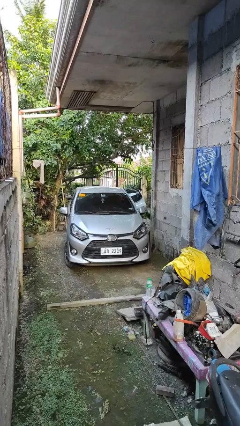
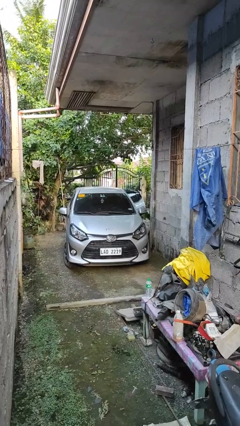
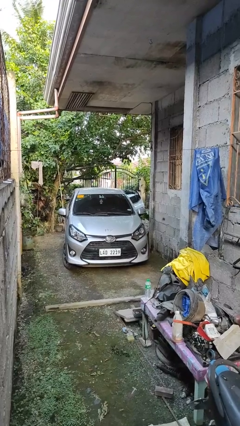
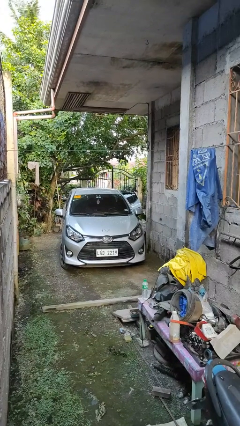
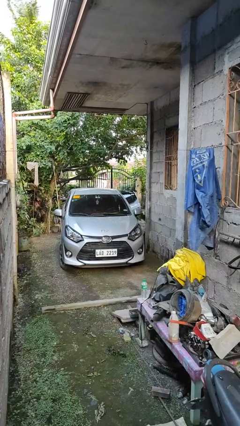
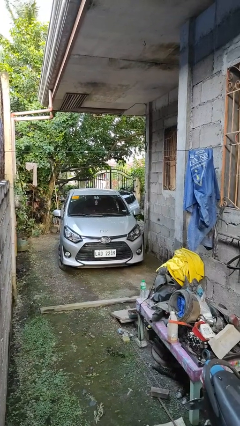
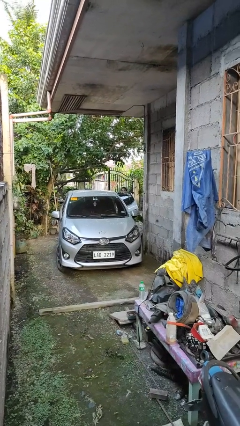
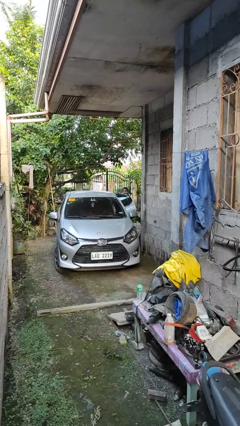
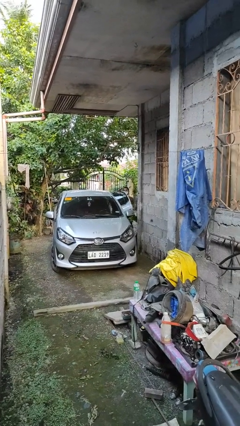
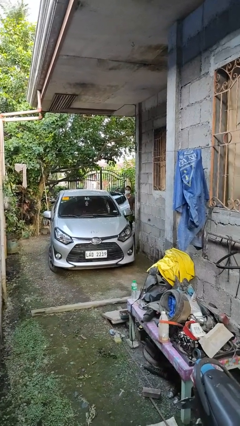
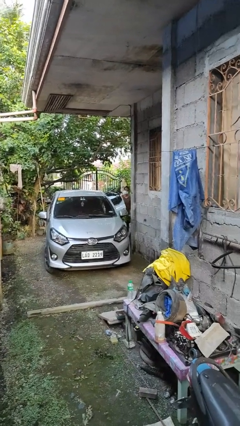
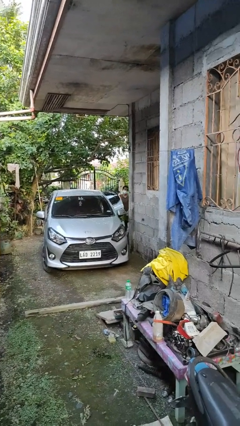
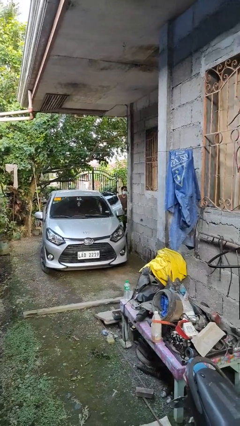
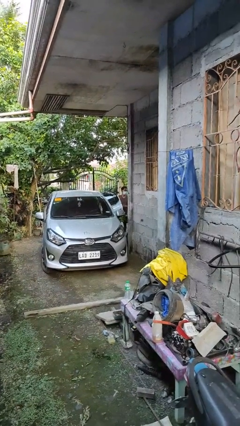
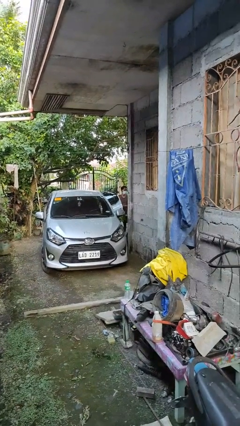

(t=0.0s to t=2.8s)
person exits car

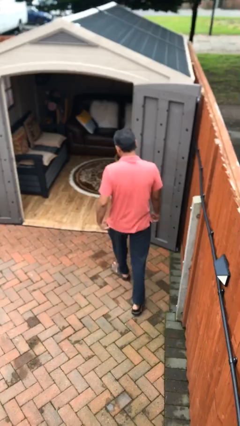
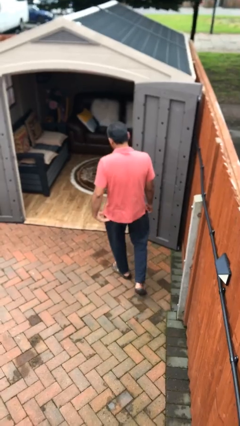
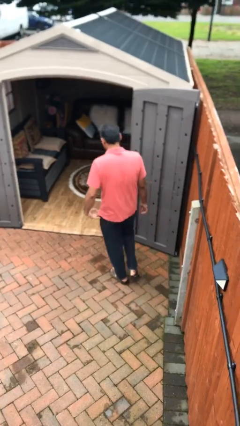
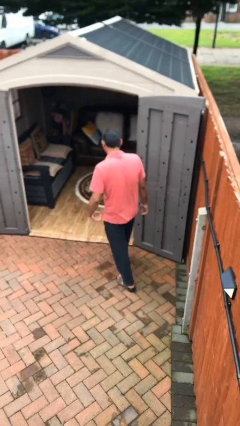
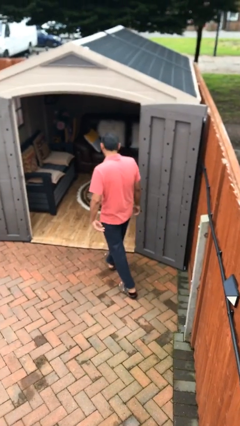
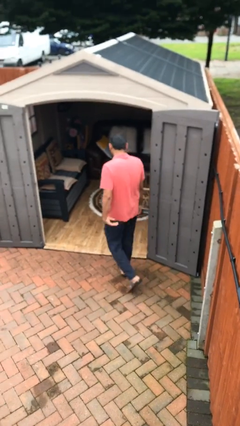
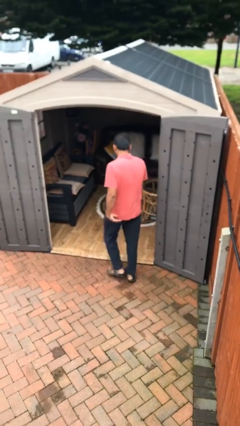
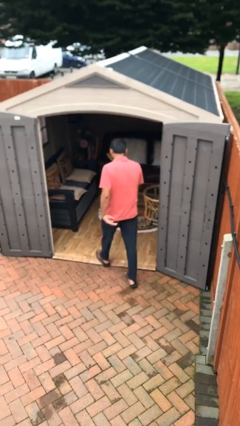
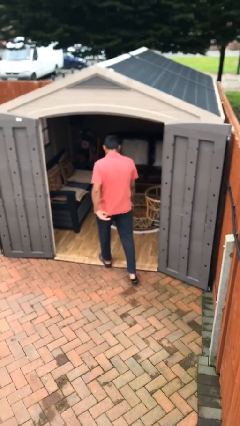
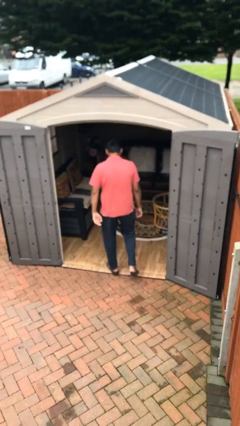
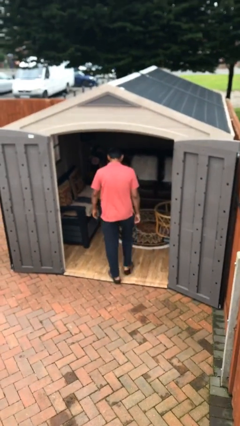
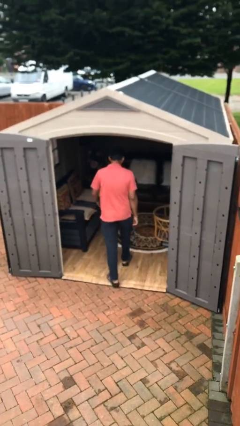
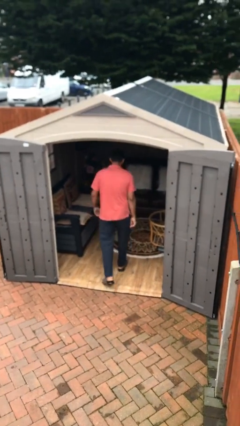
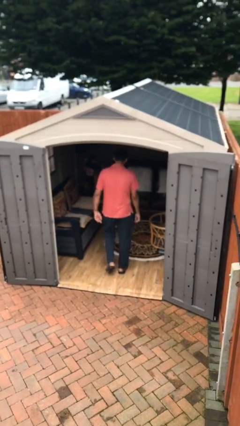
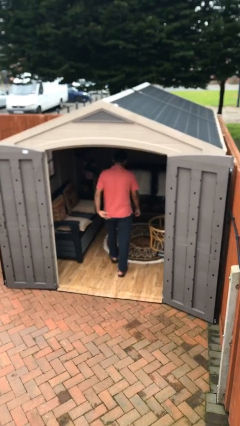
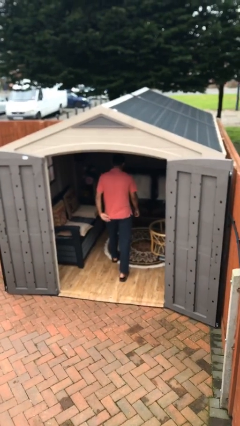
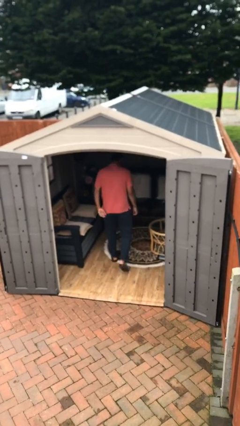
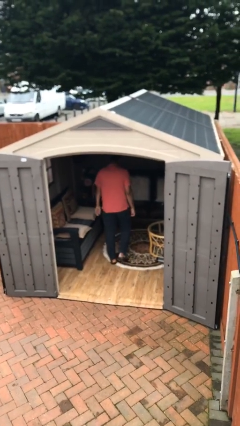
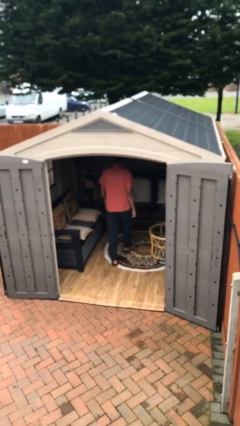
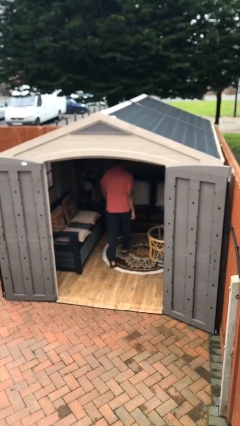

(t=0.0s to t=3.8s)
person exits scene through structure

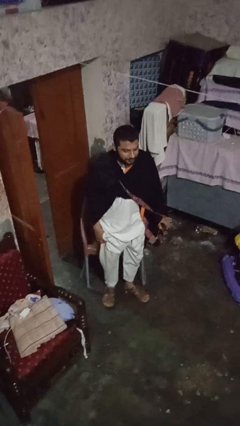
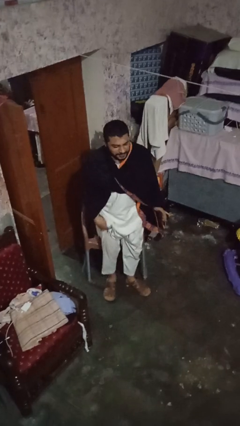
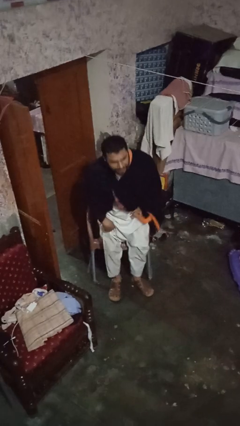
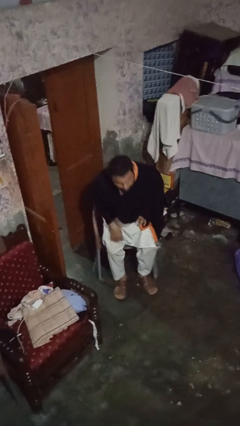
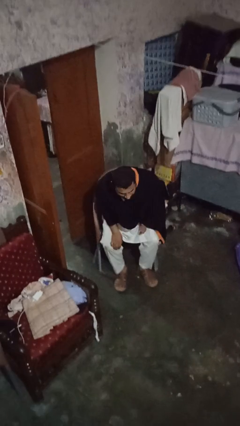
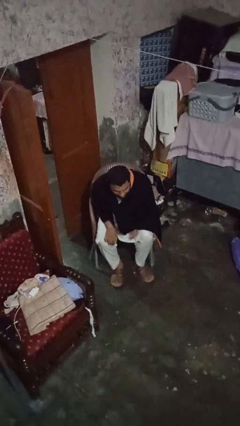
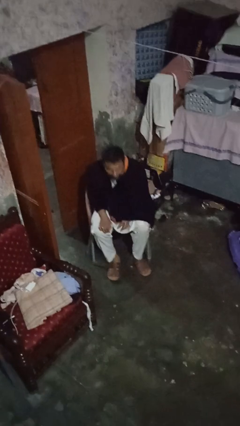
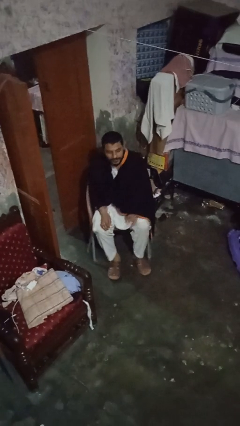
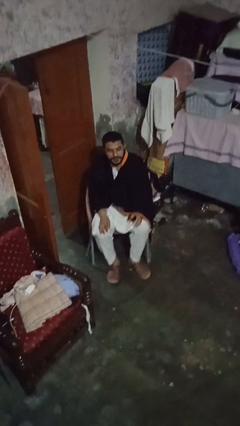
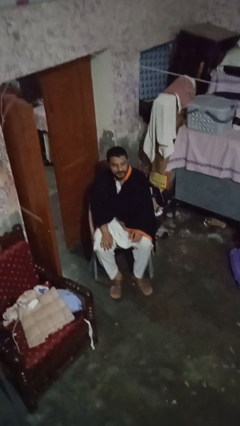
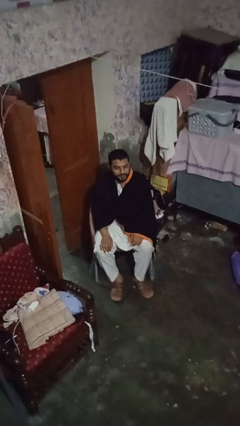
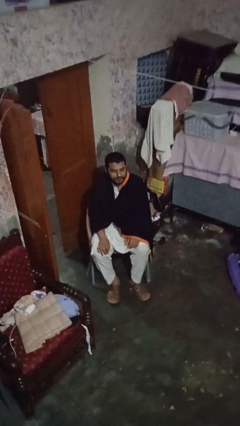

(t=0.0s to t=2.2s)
person sits down

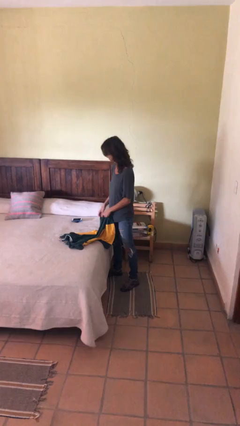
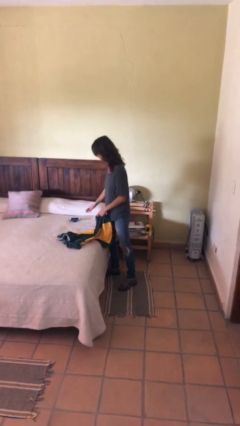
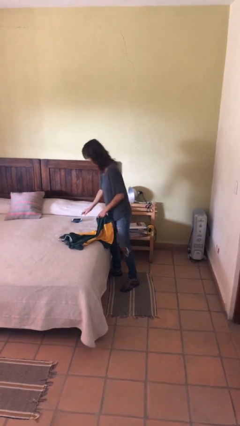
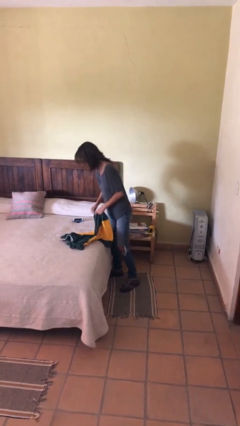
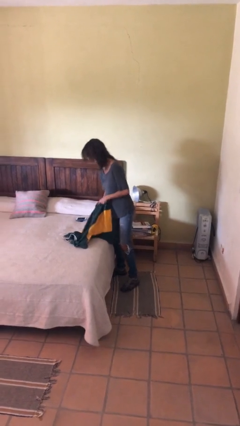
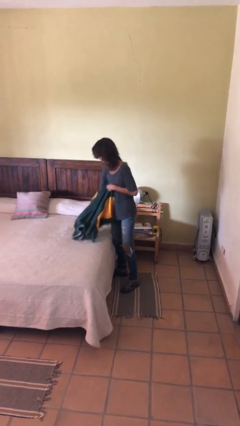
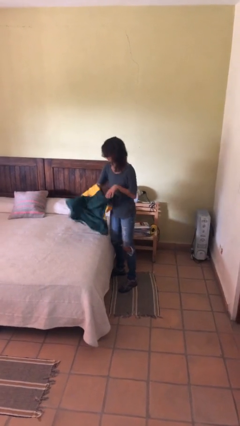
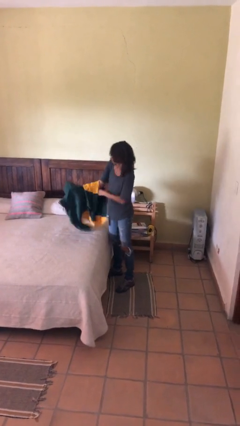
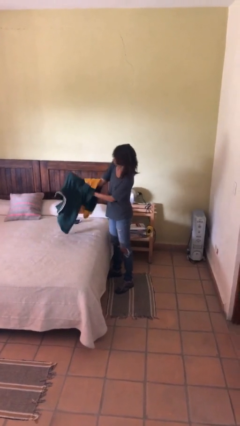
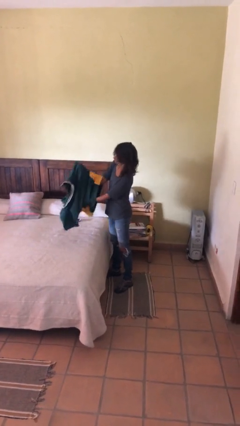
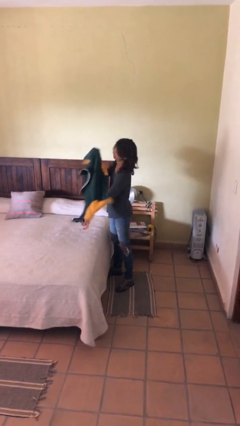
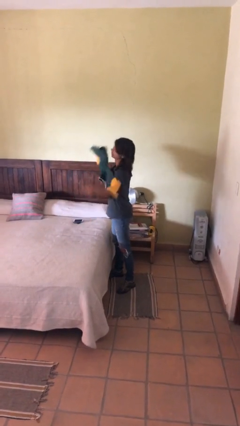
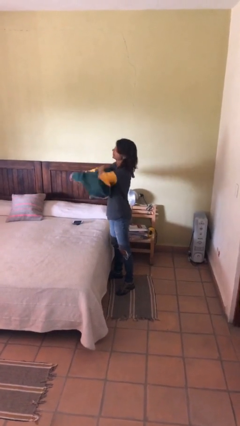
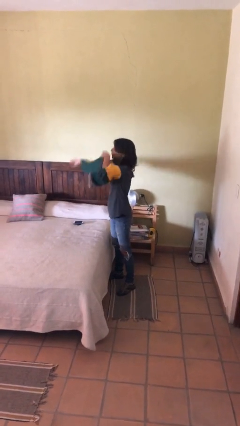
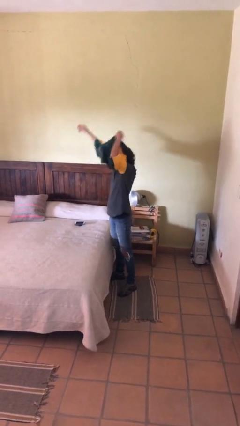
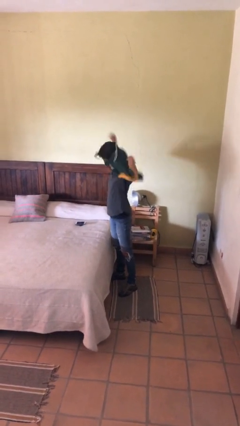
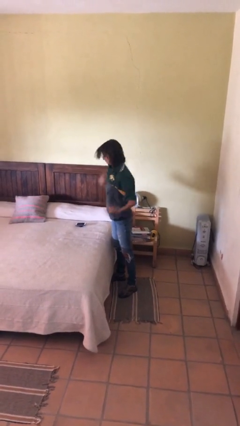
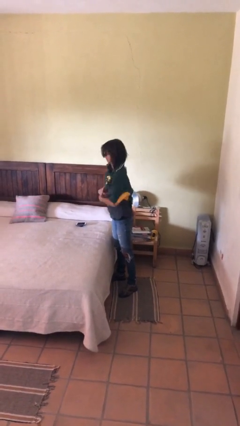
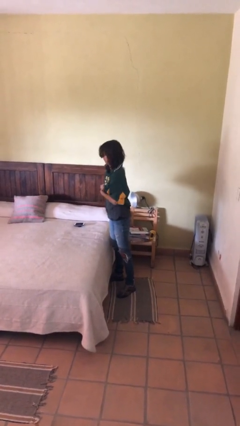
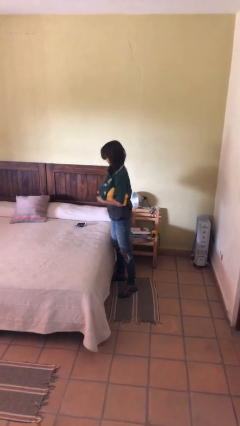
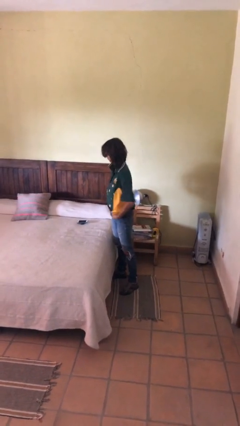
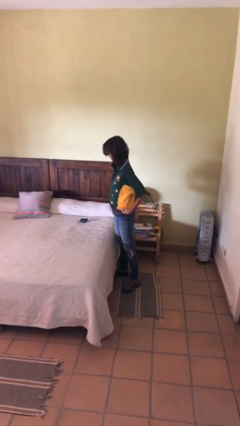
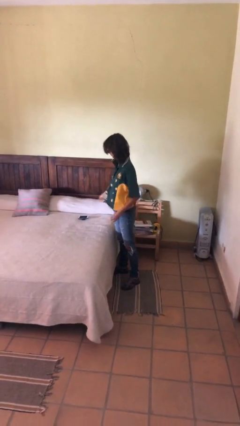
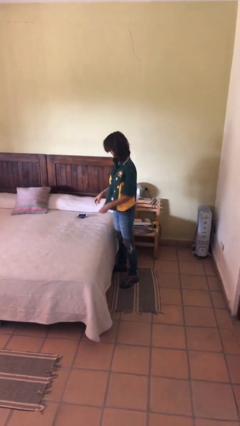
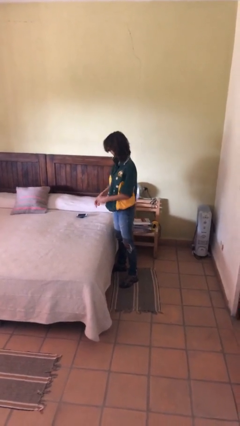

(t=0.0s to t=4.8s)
person puts on shirt

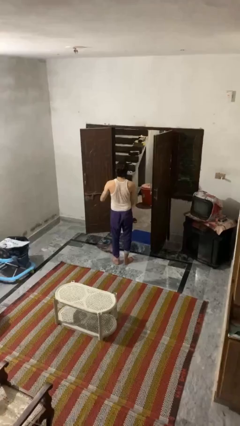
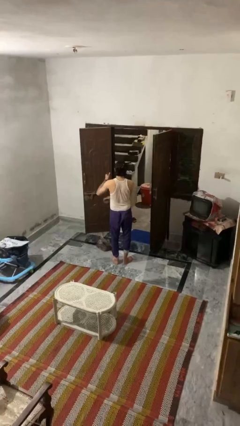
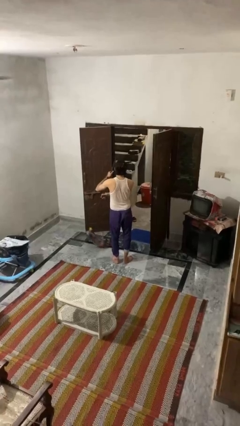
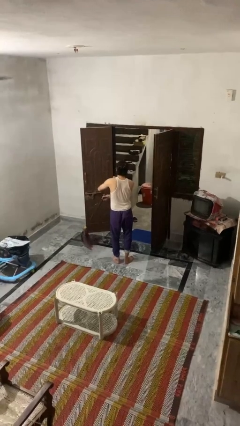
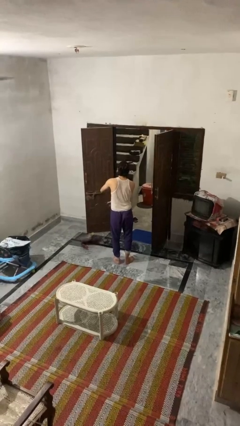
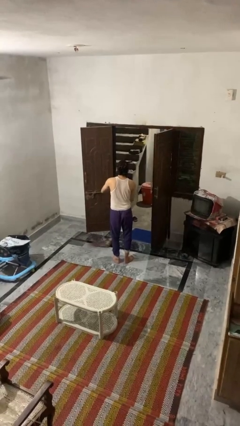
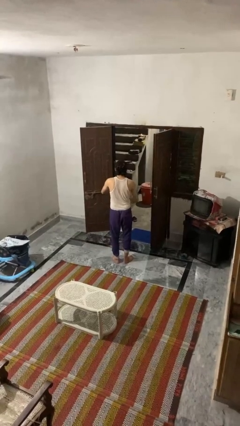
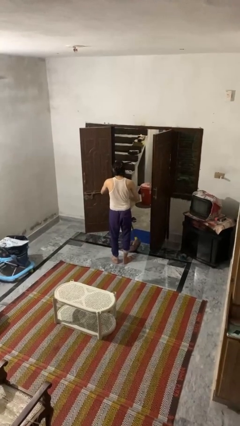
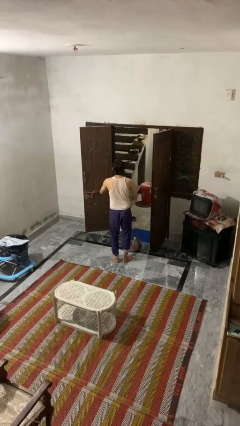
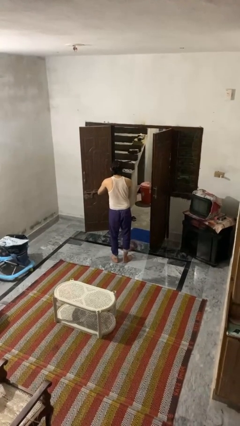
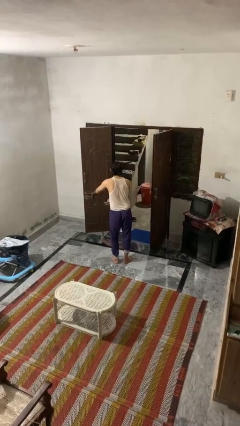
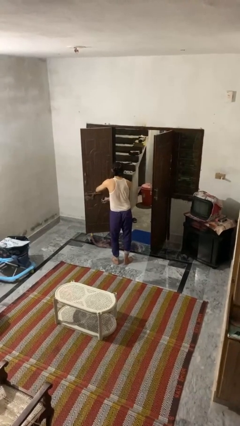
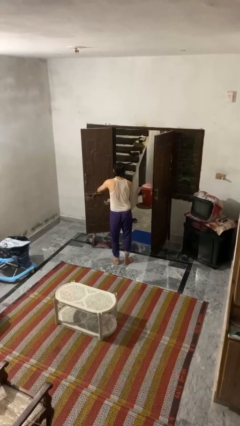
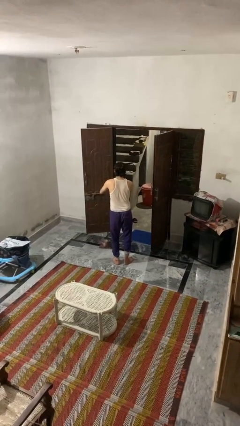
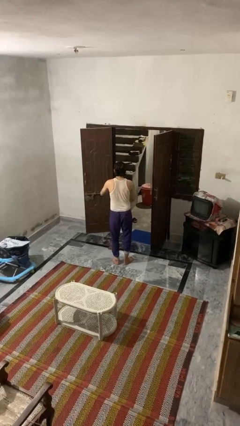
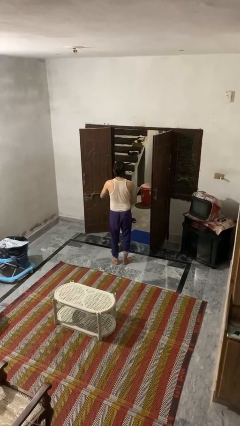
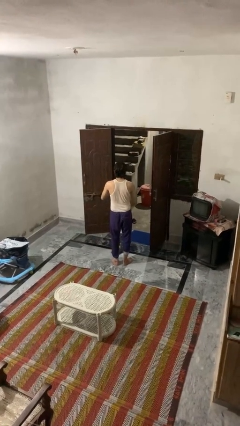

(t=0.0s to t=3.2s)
person mops

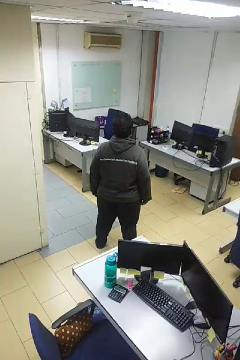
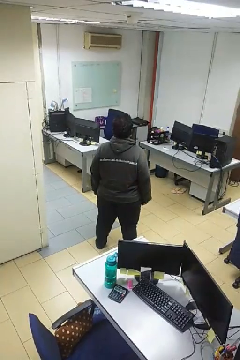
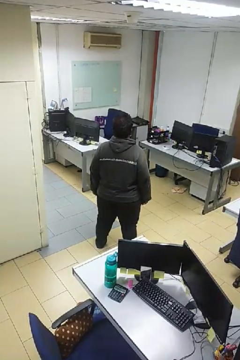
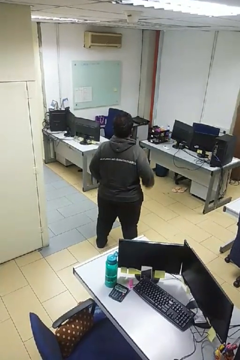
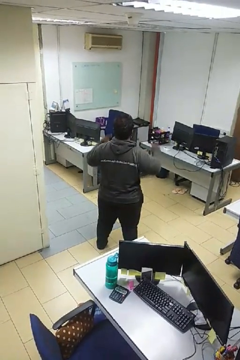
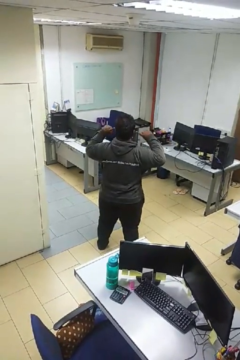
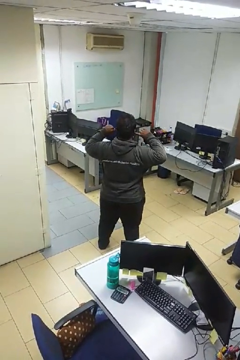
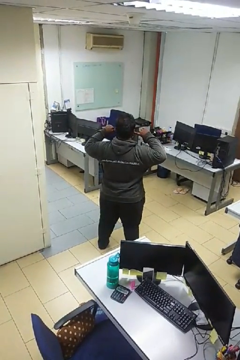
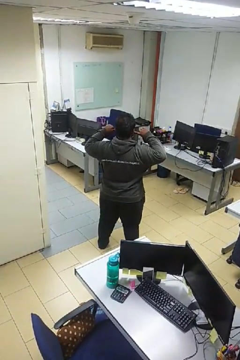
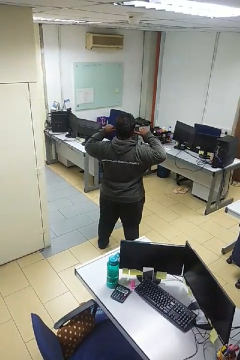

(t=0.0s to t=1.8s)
person puts fingers in ear
